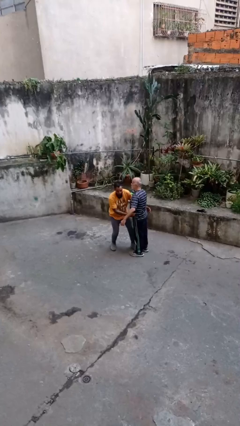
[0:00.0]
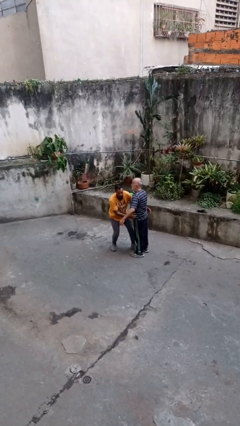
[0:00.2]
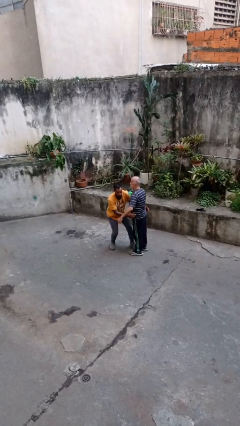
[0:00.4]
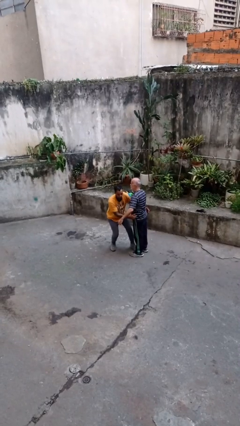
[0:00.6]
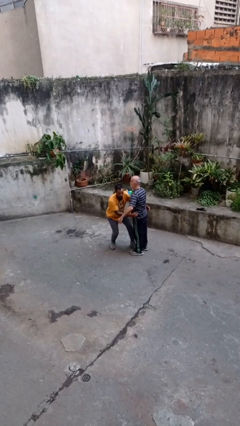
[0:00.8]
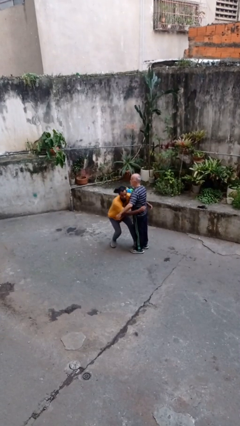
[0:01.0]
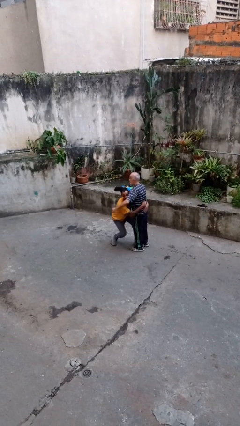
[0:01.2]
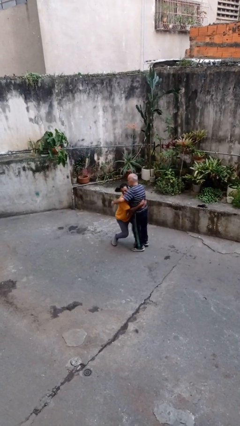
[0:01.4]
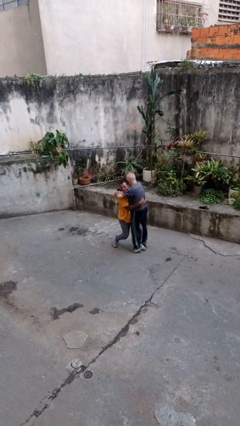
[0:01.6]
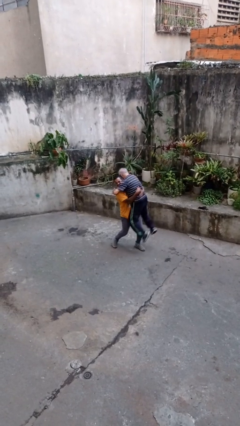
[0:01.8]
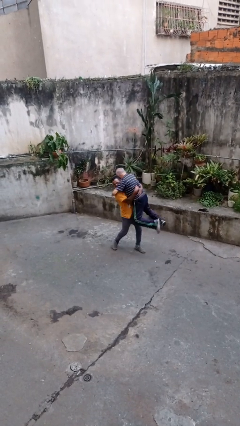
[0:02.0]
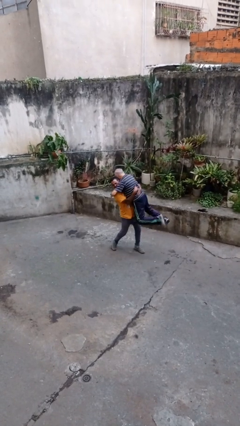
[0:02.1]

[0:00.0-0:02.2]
person picks up person

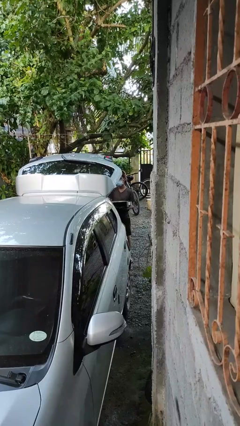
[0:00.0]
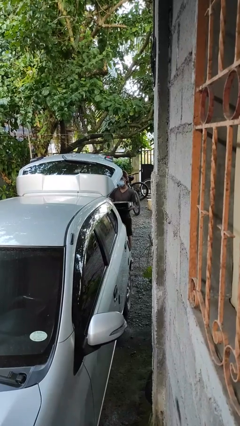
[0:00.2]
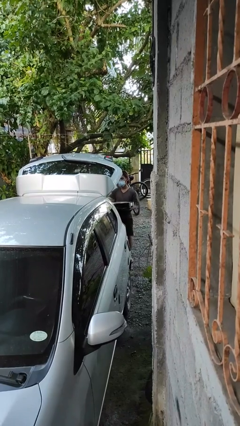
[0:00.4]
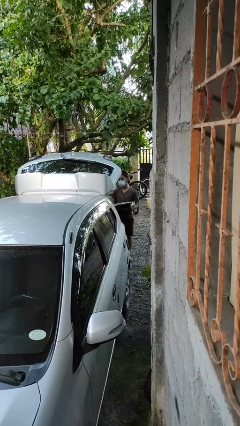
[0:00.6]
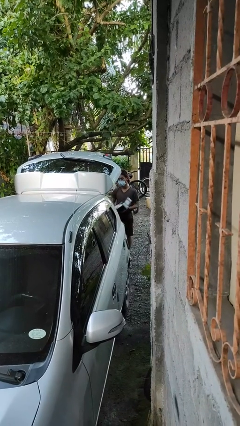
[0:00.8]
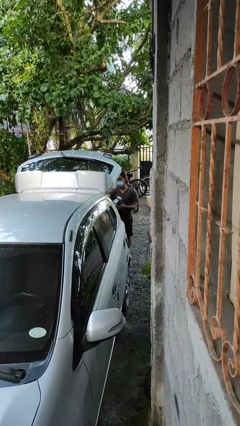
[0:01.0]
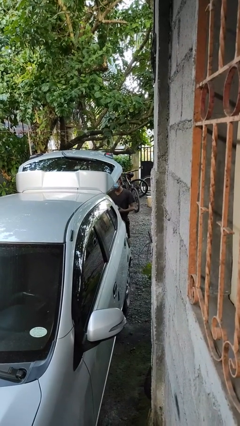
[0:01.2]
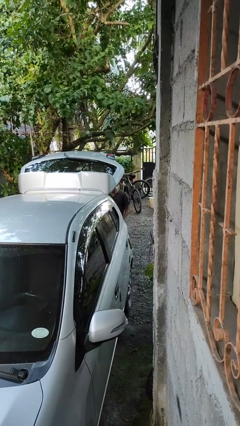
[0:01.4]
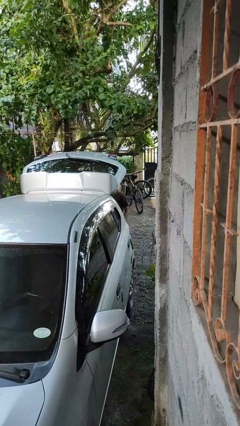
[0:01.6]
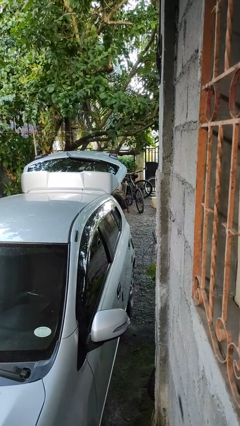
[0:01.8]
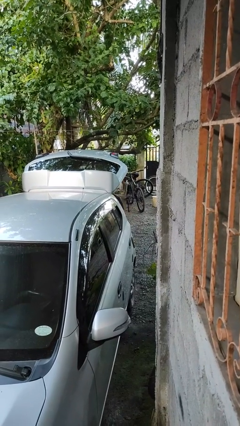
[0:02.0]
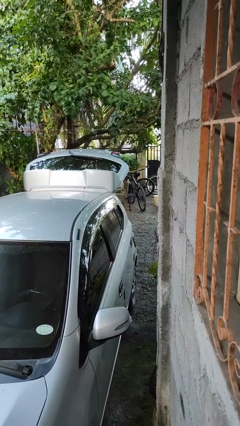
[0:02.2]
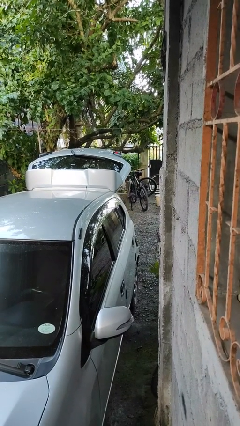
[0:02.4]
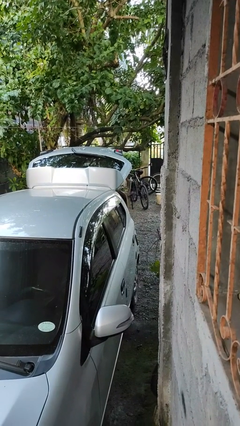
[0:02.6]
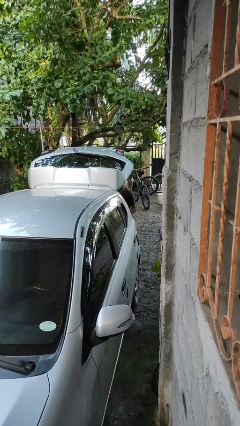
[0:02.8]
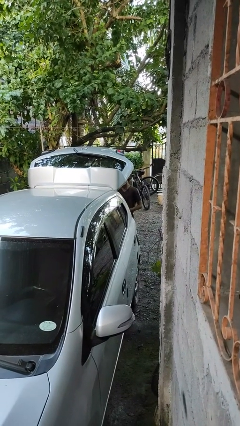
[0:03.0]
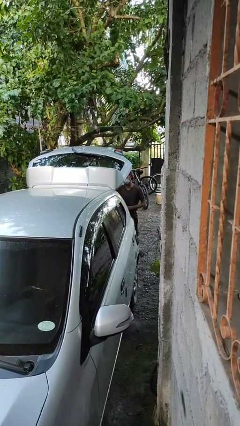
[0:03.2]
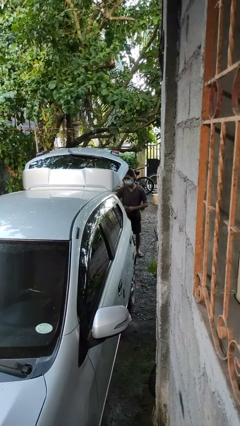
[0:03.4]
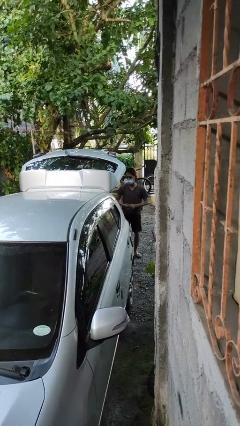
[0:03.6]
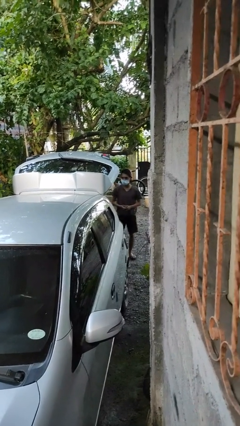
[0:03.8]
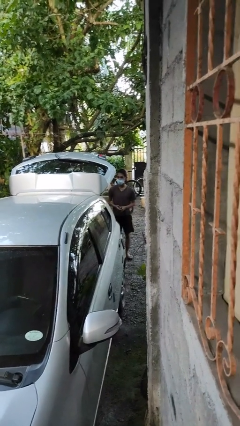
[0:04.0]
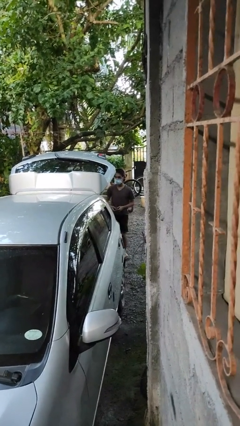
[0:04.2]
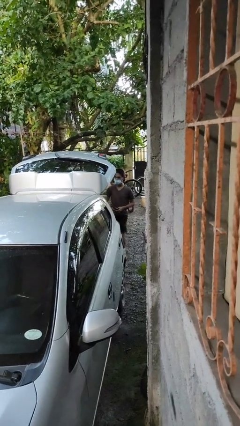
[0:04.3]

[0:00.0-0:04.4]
person loads car

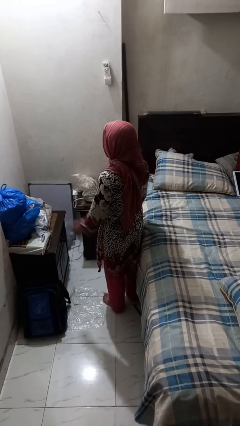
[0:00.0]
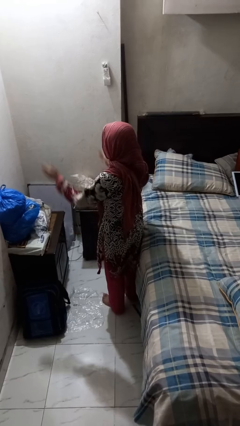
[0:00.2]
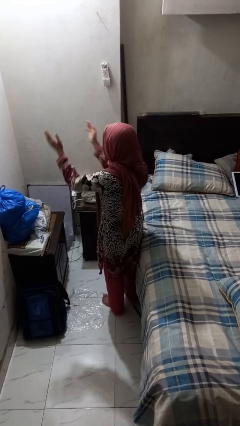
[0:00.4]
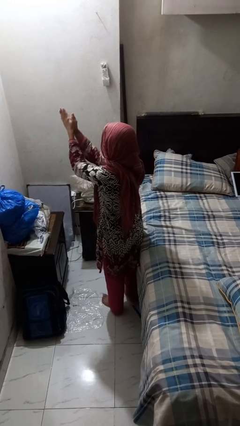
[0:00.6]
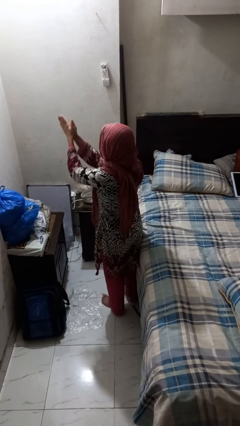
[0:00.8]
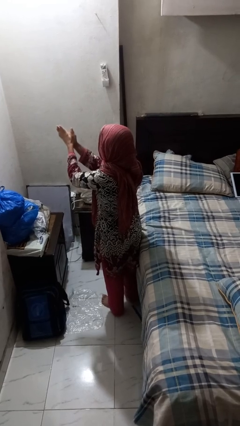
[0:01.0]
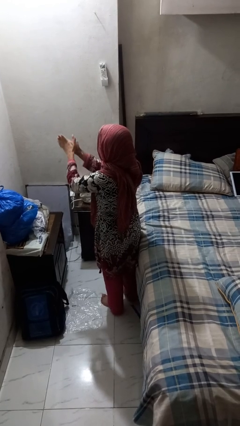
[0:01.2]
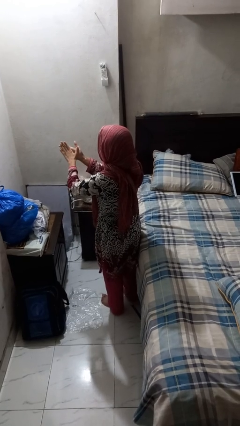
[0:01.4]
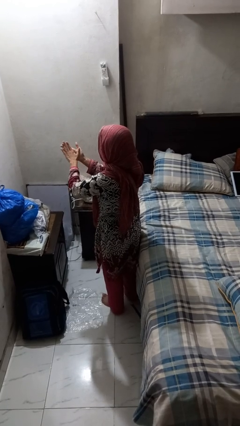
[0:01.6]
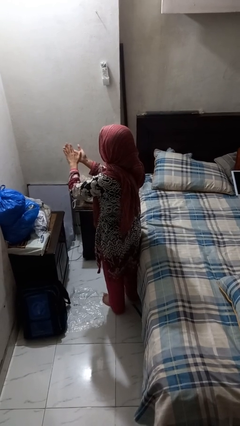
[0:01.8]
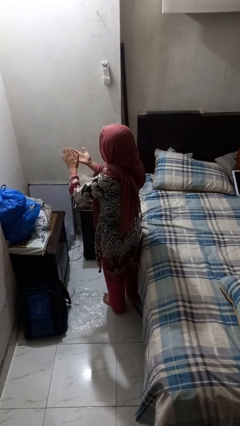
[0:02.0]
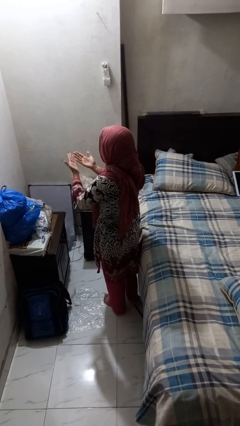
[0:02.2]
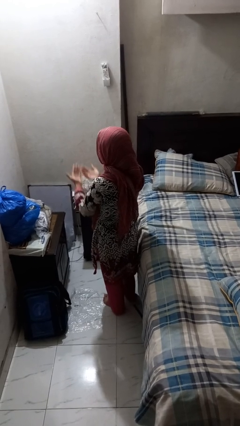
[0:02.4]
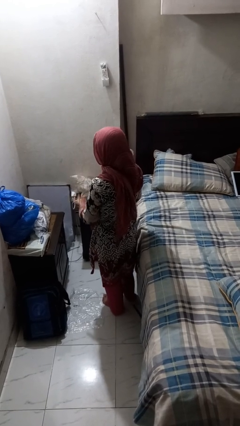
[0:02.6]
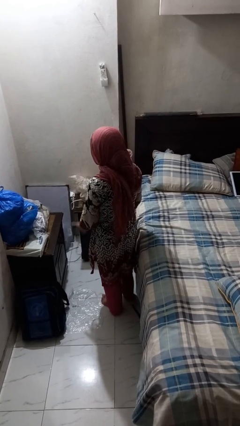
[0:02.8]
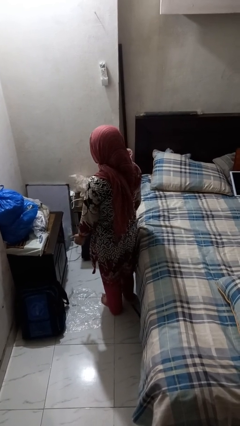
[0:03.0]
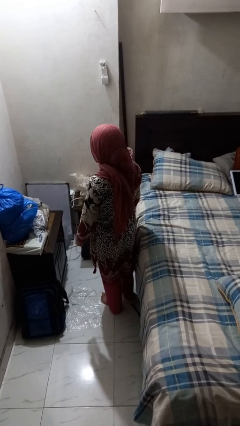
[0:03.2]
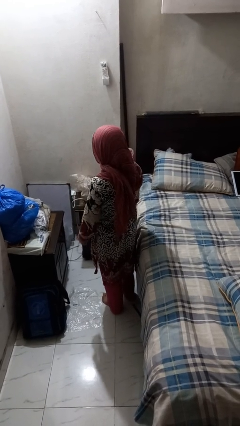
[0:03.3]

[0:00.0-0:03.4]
person swats bug

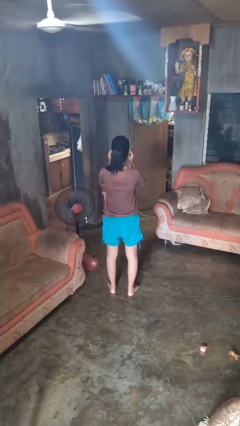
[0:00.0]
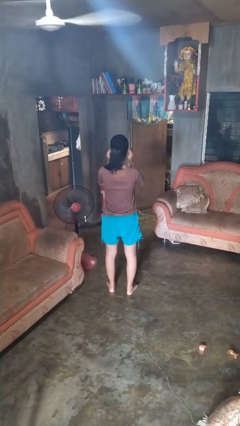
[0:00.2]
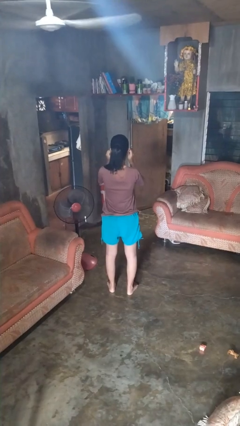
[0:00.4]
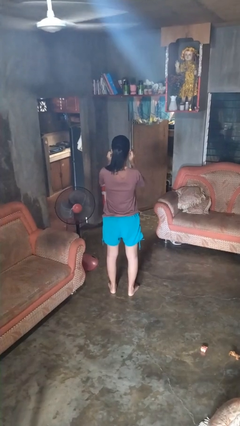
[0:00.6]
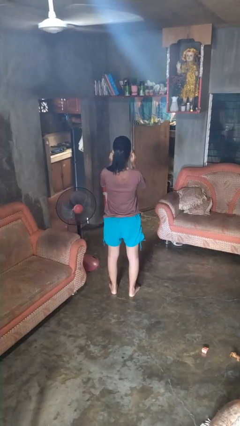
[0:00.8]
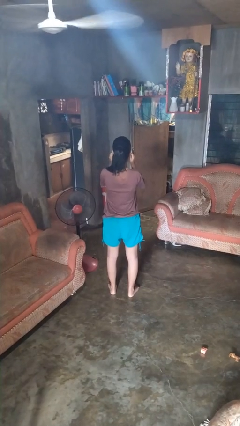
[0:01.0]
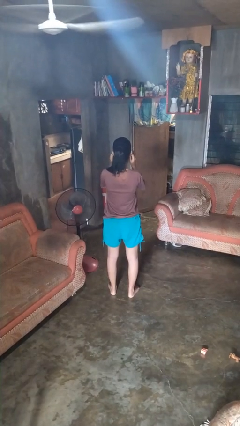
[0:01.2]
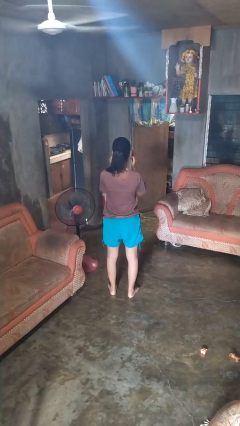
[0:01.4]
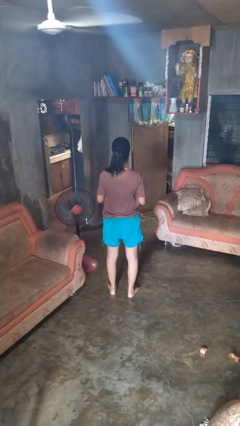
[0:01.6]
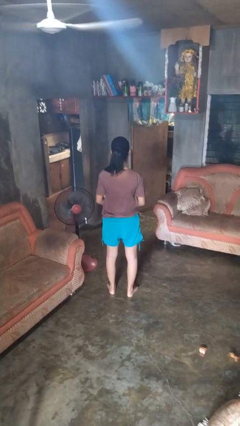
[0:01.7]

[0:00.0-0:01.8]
person touches earlobe

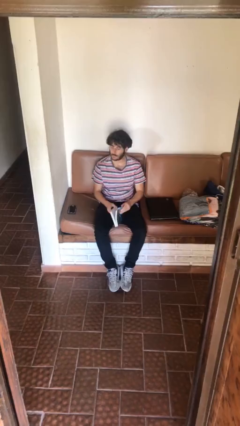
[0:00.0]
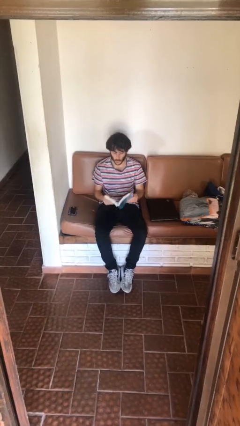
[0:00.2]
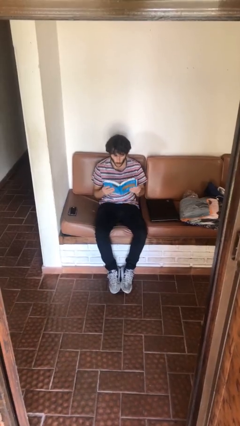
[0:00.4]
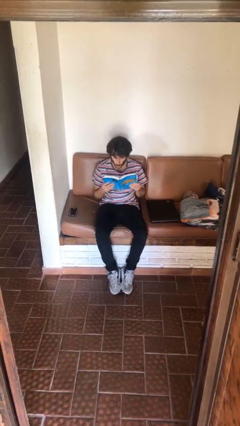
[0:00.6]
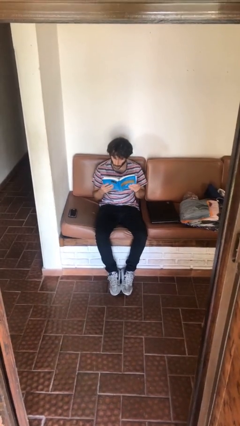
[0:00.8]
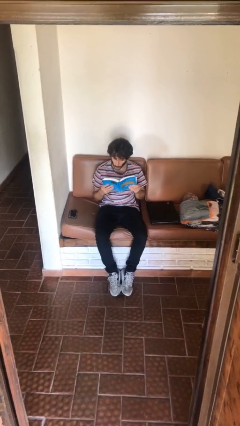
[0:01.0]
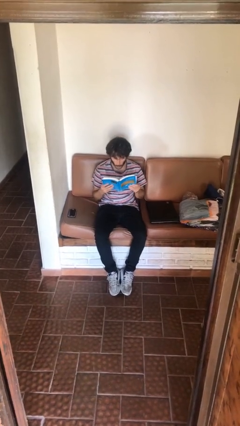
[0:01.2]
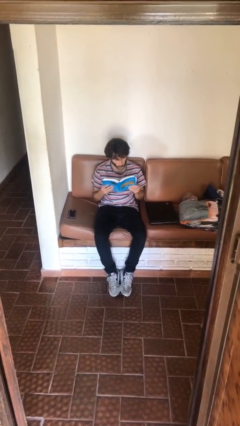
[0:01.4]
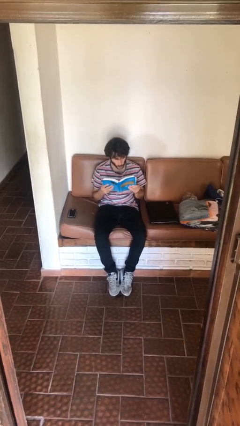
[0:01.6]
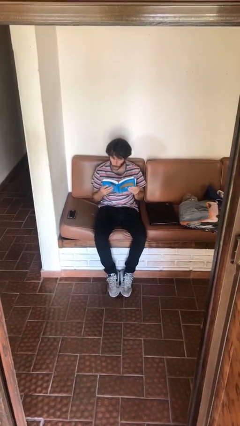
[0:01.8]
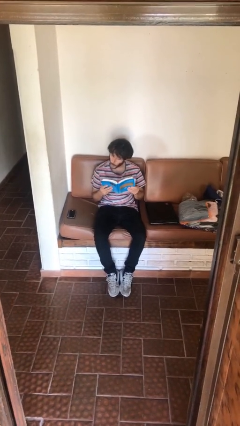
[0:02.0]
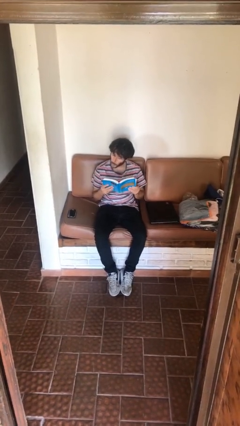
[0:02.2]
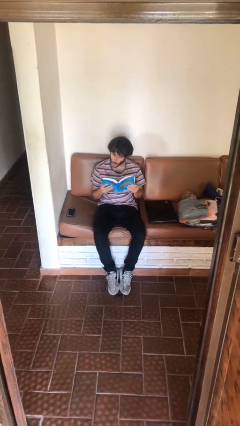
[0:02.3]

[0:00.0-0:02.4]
person reads document

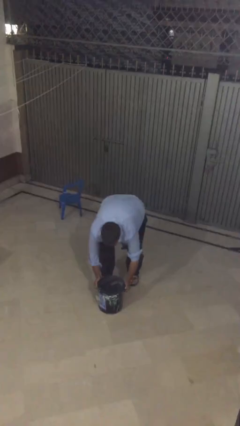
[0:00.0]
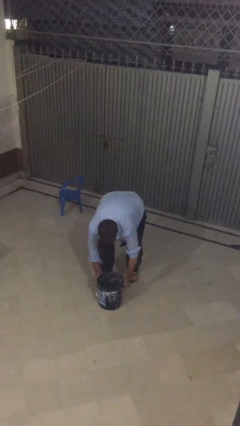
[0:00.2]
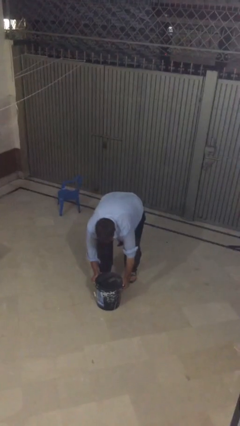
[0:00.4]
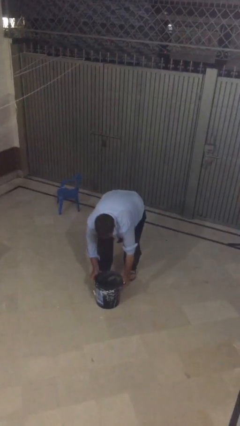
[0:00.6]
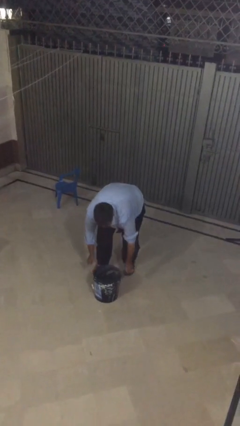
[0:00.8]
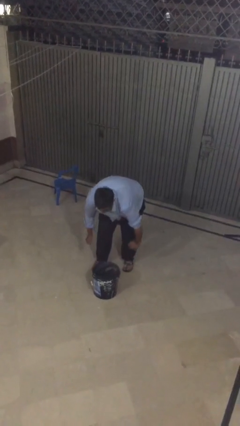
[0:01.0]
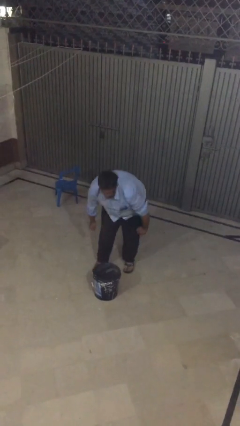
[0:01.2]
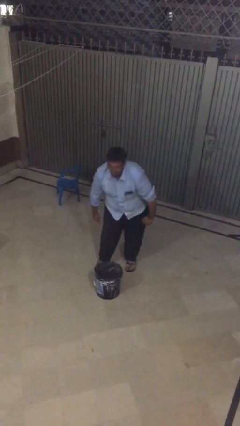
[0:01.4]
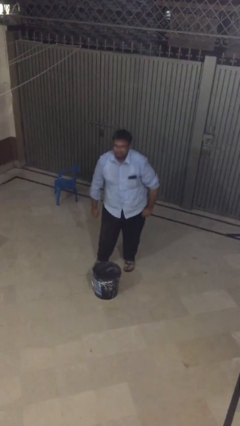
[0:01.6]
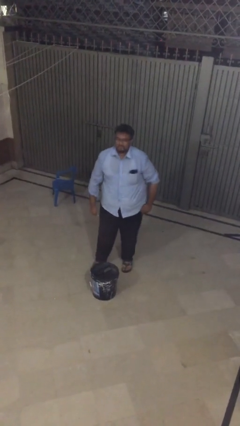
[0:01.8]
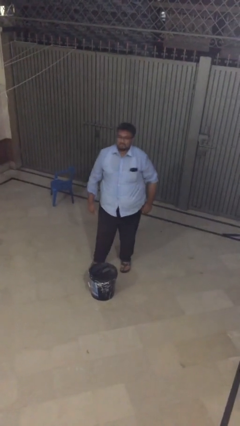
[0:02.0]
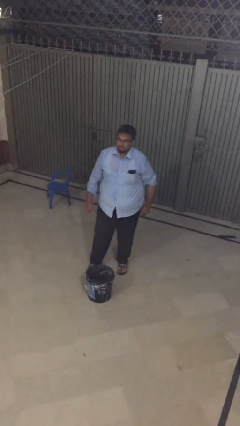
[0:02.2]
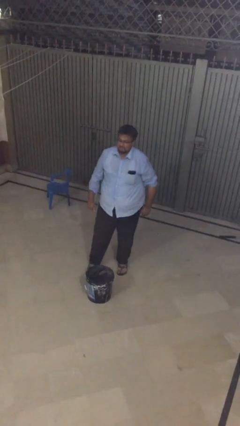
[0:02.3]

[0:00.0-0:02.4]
person puts down object on floor

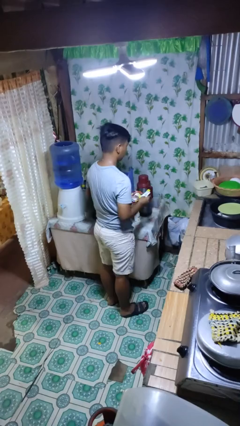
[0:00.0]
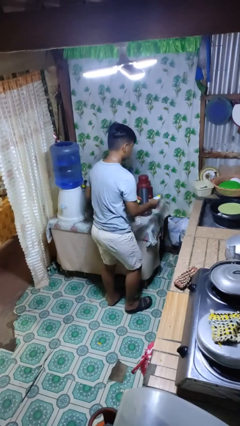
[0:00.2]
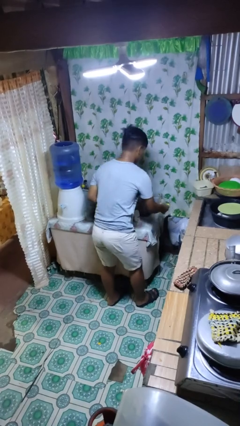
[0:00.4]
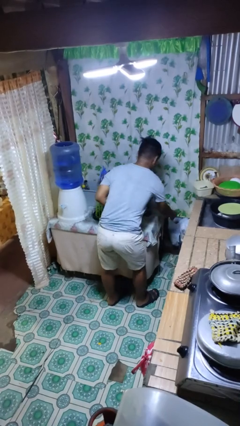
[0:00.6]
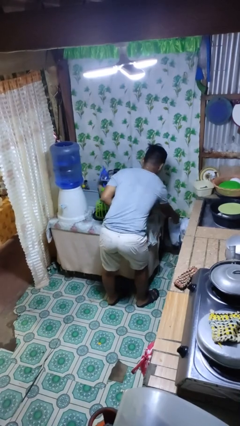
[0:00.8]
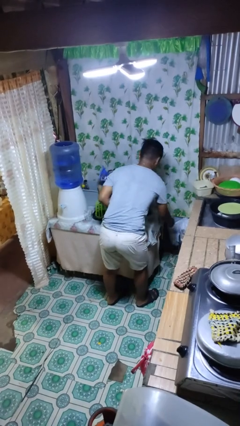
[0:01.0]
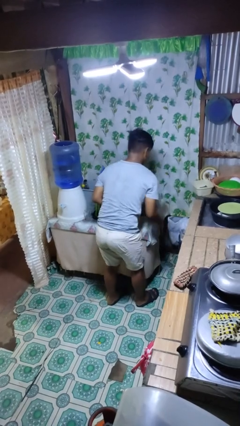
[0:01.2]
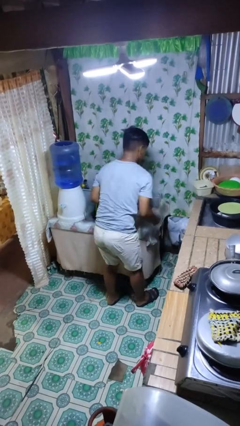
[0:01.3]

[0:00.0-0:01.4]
person discards trash
